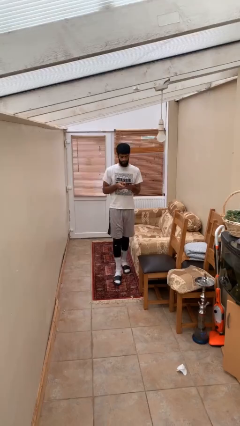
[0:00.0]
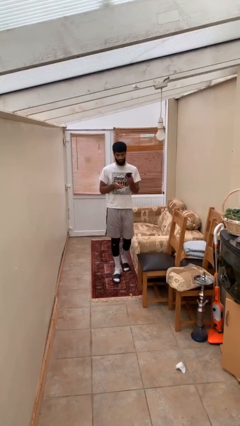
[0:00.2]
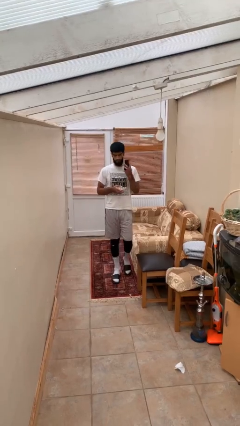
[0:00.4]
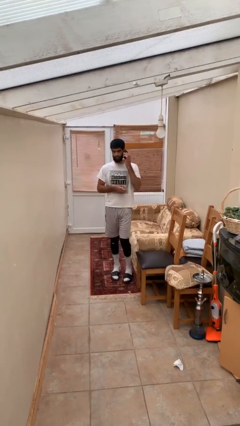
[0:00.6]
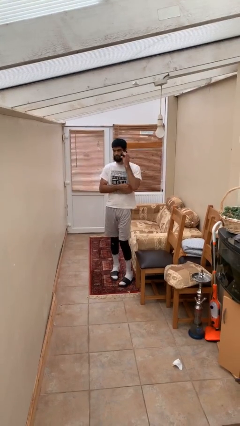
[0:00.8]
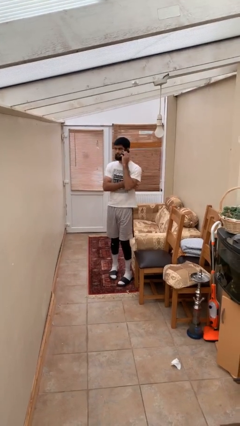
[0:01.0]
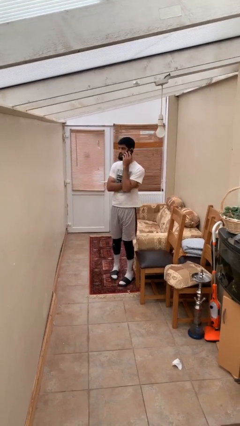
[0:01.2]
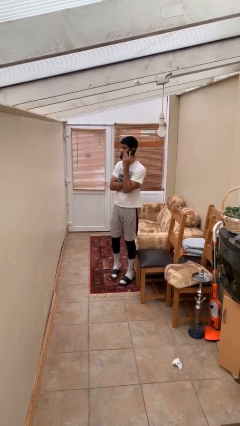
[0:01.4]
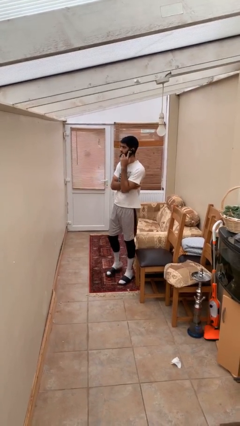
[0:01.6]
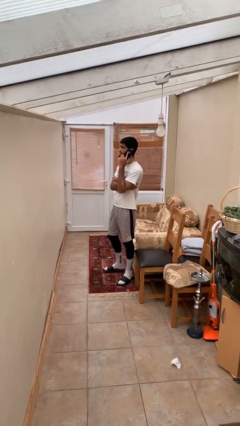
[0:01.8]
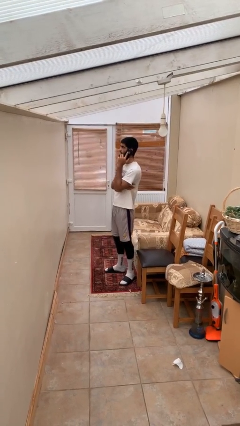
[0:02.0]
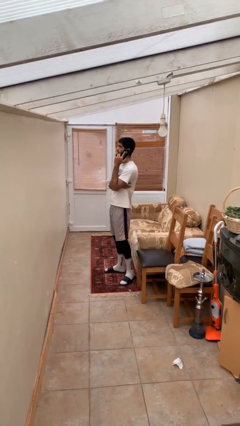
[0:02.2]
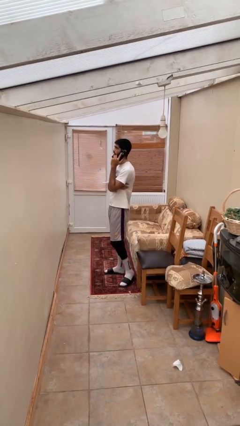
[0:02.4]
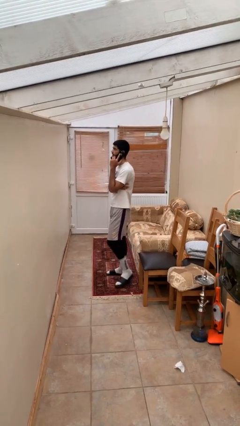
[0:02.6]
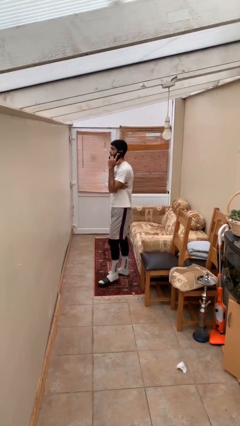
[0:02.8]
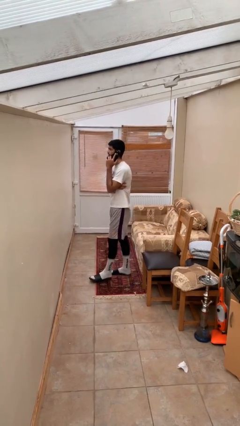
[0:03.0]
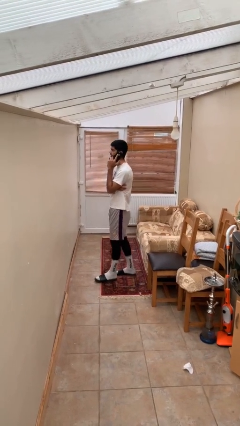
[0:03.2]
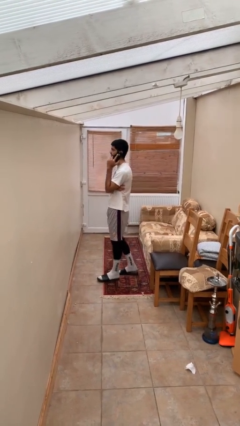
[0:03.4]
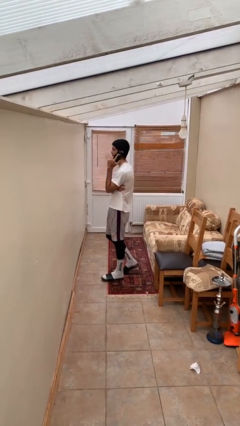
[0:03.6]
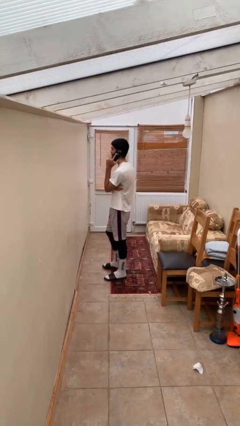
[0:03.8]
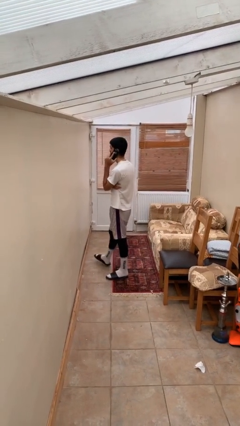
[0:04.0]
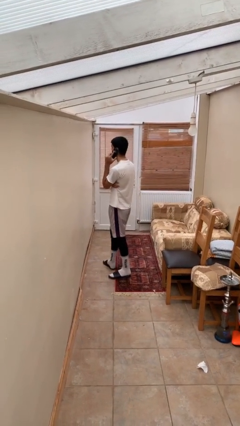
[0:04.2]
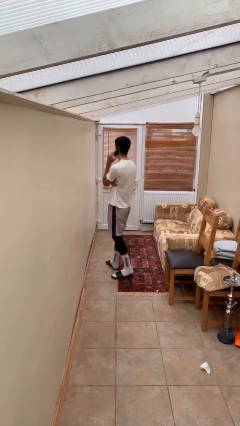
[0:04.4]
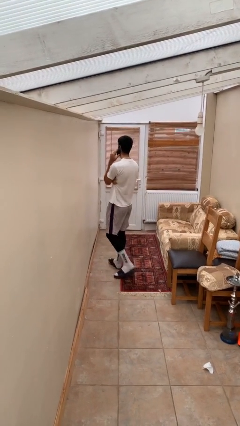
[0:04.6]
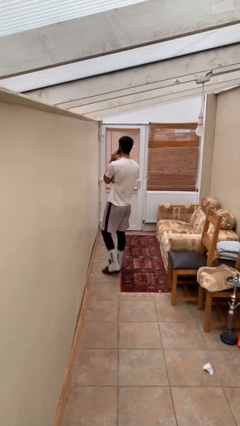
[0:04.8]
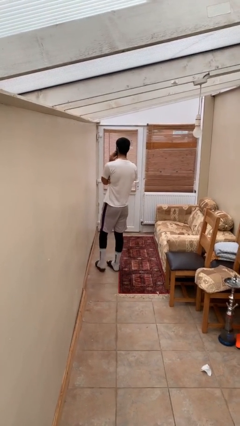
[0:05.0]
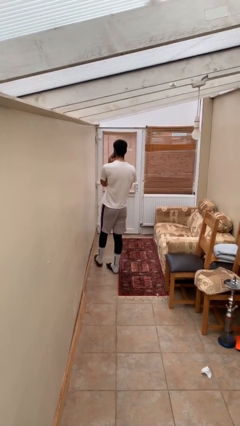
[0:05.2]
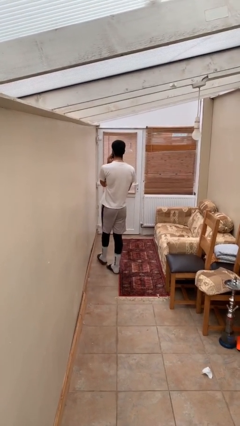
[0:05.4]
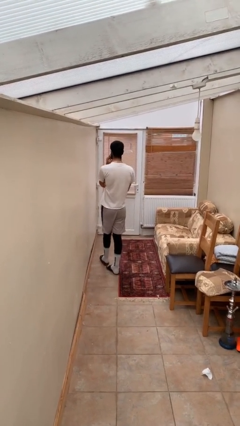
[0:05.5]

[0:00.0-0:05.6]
person talks on phone

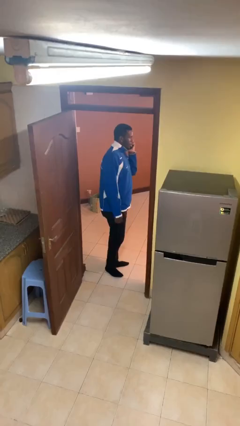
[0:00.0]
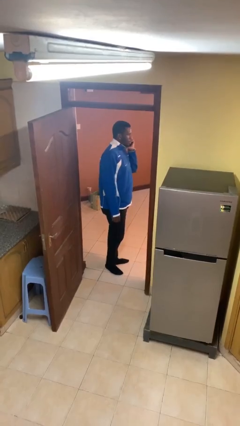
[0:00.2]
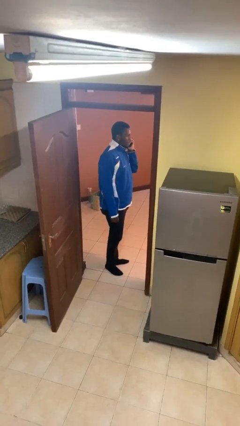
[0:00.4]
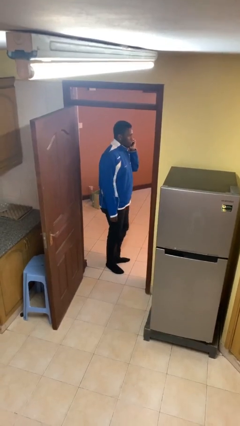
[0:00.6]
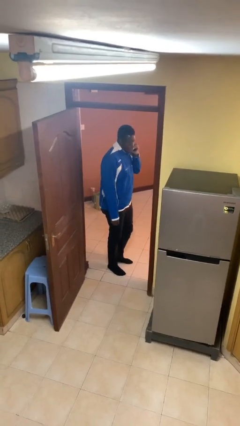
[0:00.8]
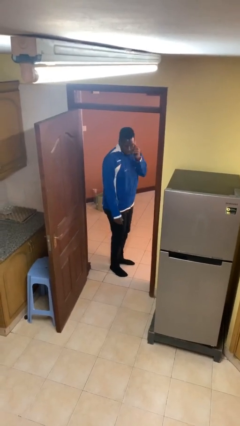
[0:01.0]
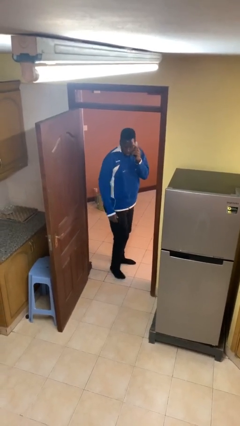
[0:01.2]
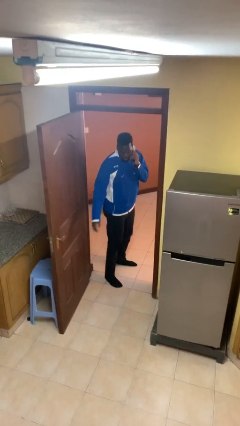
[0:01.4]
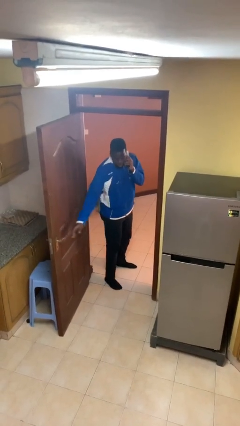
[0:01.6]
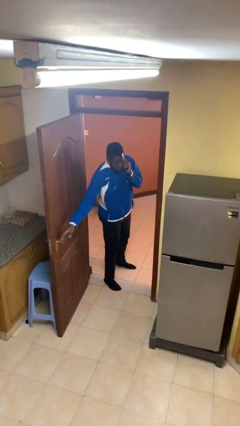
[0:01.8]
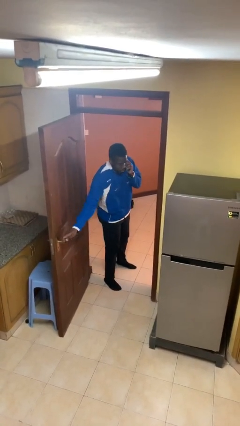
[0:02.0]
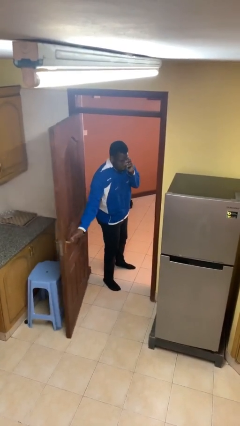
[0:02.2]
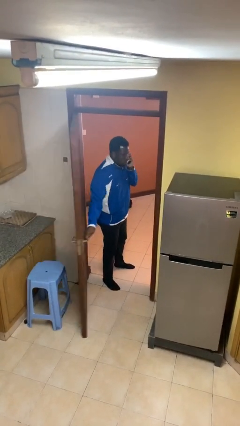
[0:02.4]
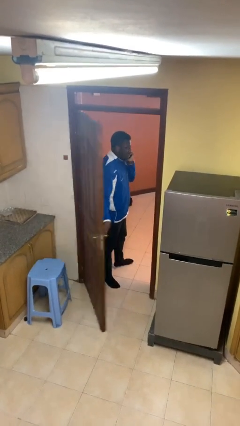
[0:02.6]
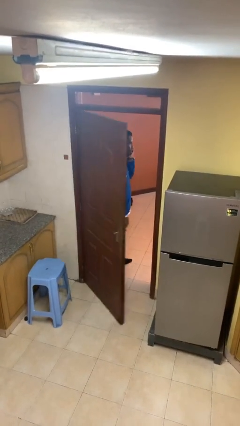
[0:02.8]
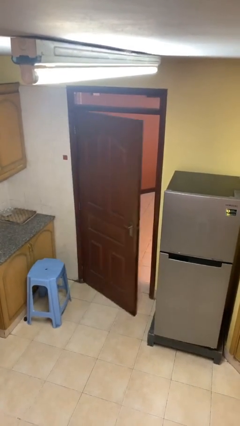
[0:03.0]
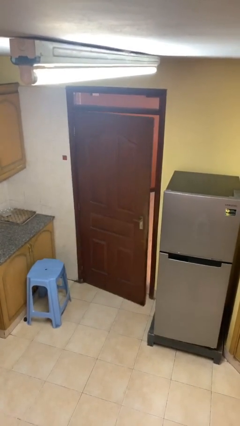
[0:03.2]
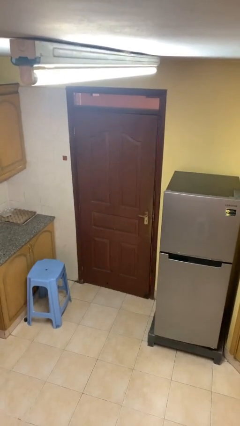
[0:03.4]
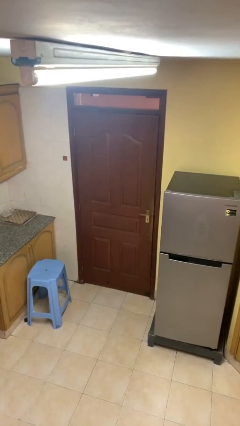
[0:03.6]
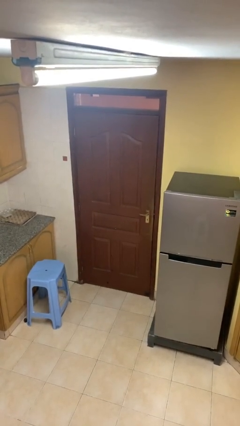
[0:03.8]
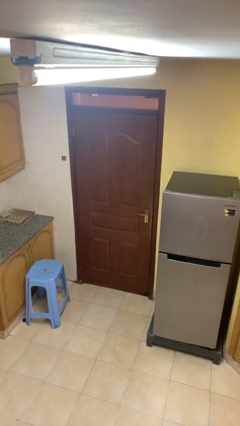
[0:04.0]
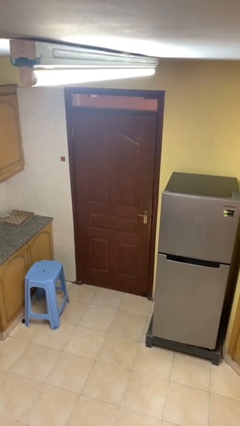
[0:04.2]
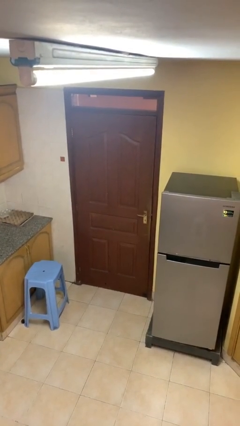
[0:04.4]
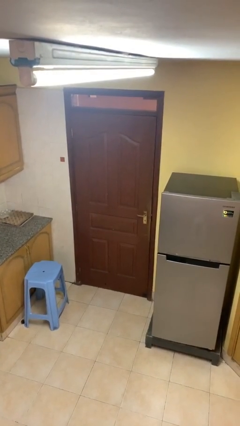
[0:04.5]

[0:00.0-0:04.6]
person closes facility door

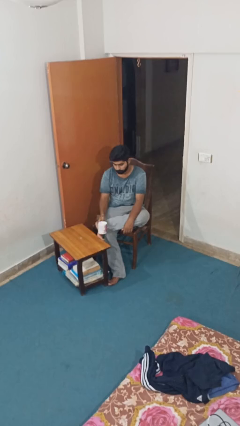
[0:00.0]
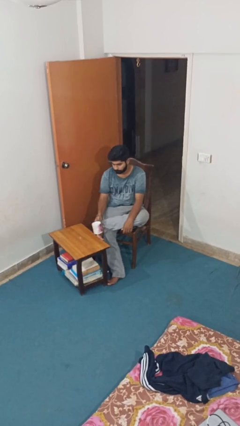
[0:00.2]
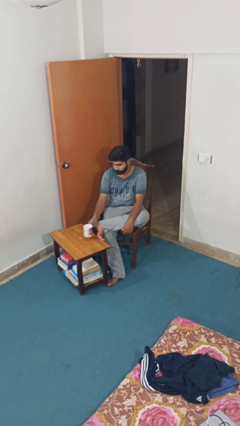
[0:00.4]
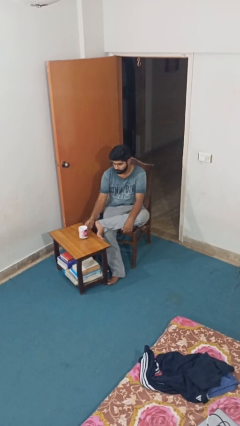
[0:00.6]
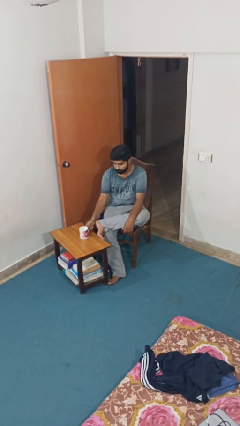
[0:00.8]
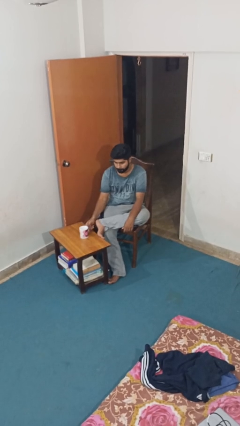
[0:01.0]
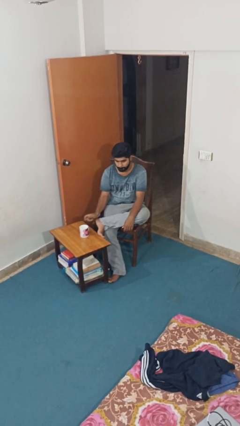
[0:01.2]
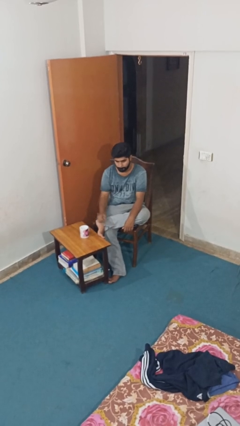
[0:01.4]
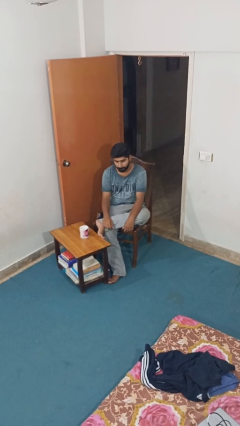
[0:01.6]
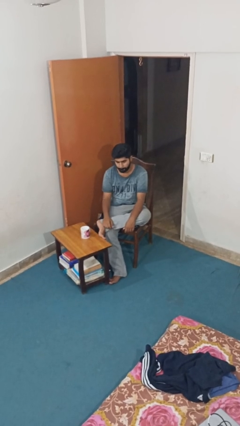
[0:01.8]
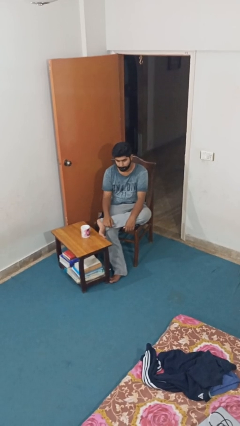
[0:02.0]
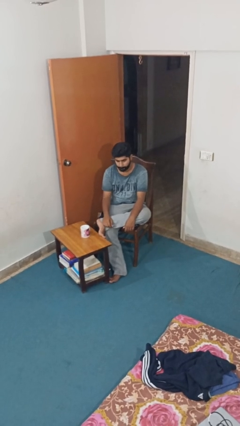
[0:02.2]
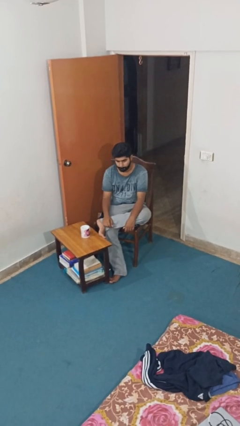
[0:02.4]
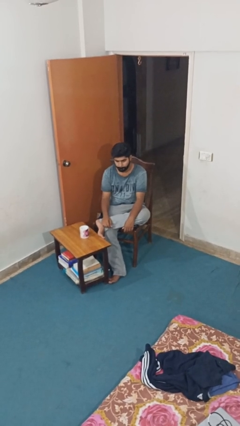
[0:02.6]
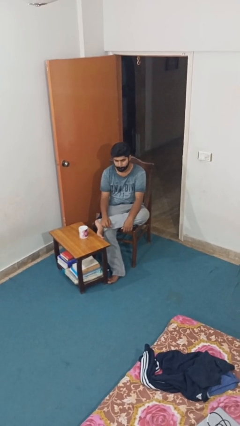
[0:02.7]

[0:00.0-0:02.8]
person puts down object on table

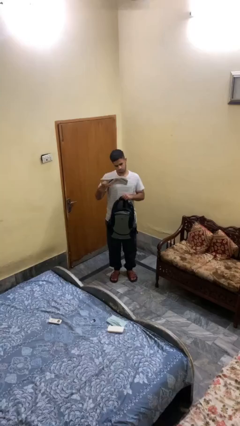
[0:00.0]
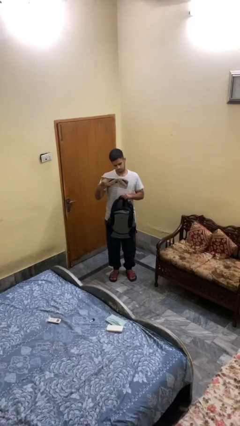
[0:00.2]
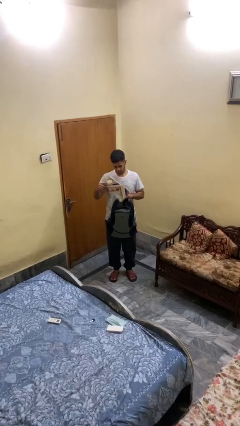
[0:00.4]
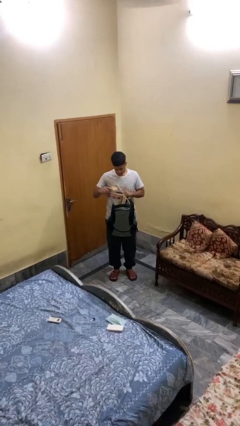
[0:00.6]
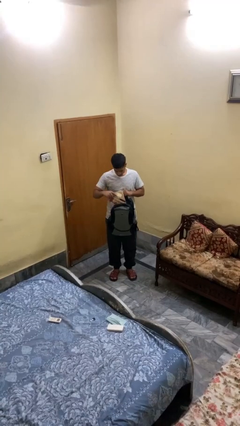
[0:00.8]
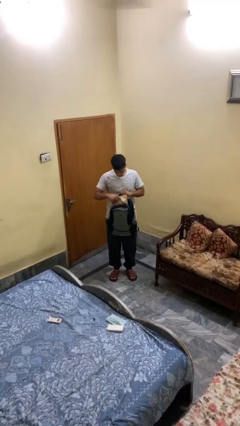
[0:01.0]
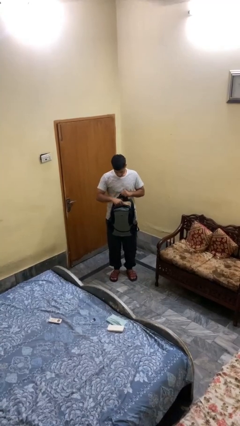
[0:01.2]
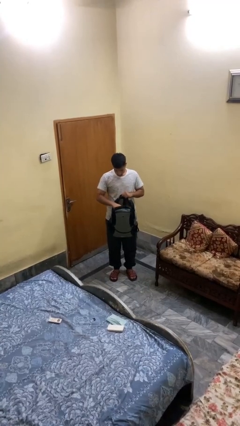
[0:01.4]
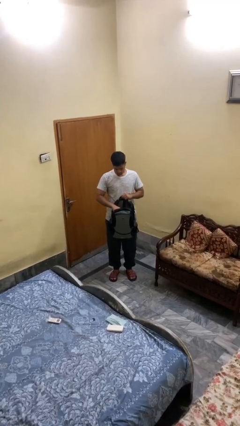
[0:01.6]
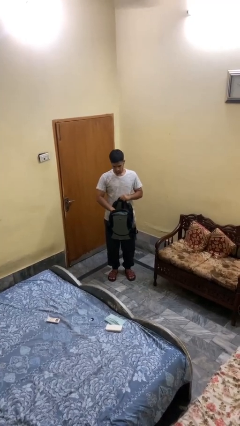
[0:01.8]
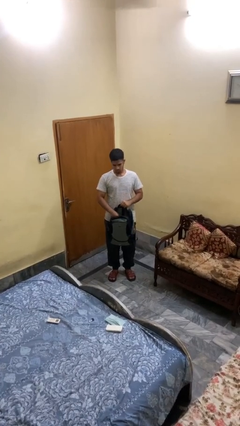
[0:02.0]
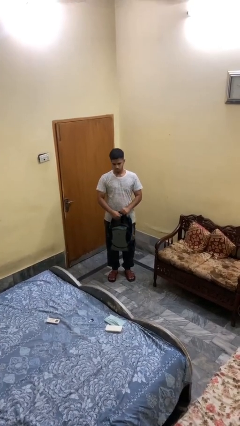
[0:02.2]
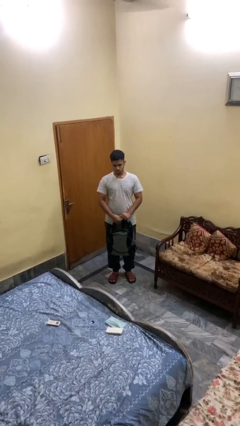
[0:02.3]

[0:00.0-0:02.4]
person puts object into backpack

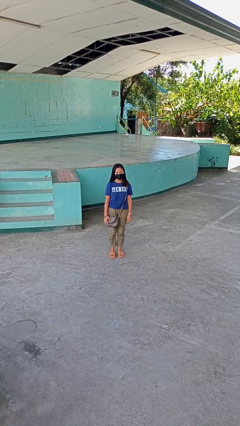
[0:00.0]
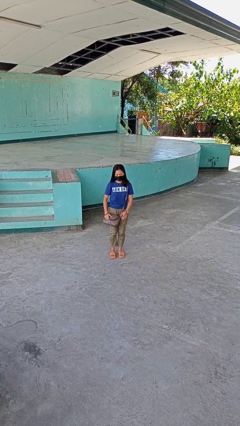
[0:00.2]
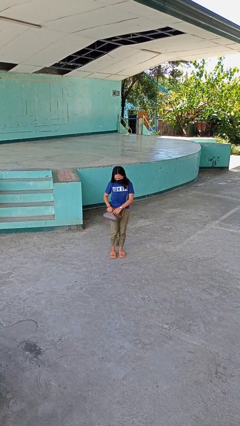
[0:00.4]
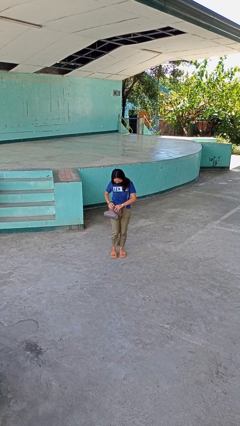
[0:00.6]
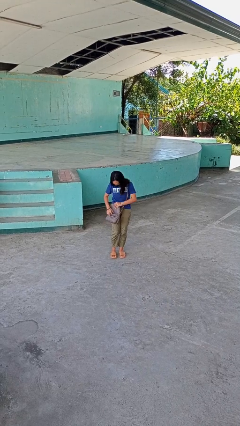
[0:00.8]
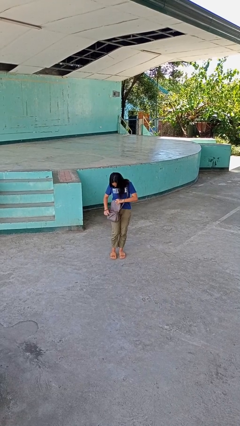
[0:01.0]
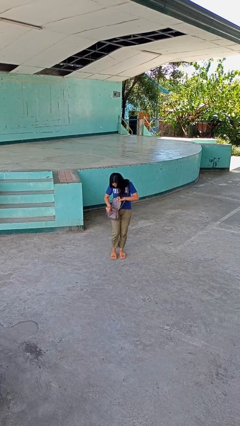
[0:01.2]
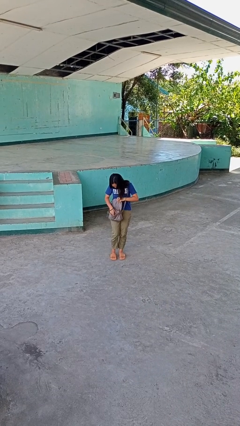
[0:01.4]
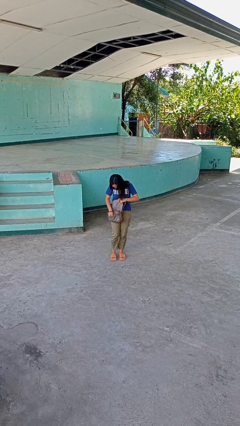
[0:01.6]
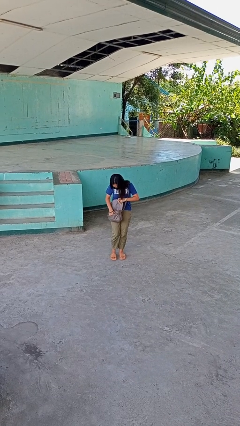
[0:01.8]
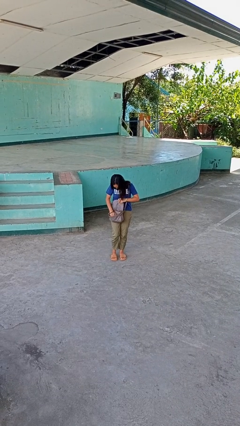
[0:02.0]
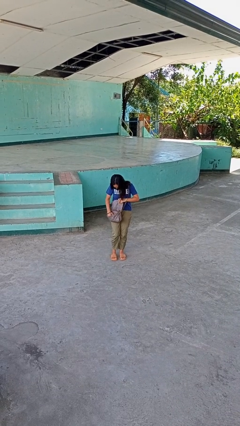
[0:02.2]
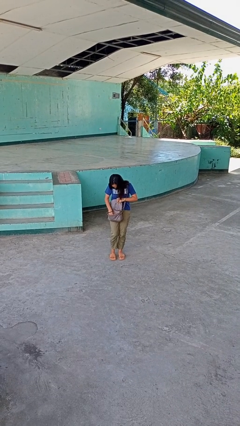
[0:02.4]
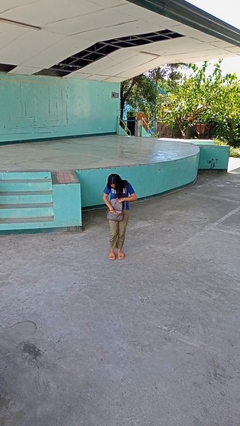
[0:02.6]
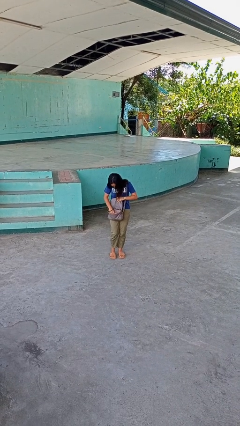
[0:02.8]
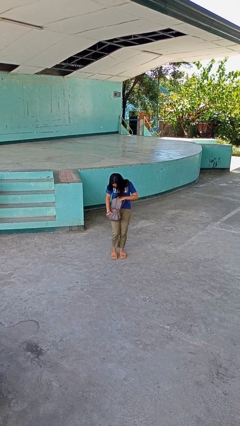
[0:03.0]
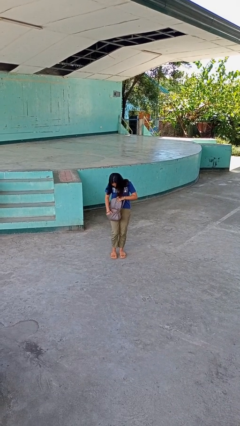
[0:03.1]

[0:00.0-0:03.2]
person searches in purse
